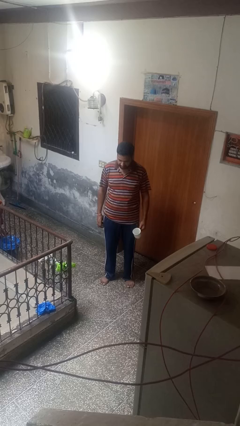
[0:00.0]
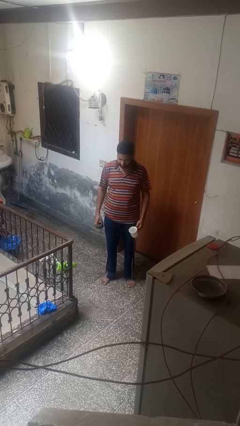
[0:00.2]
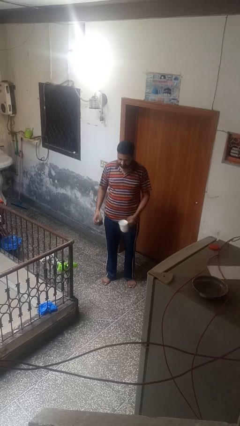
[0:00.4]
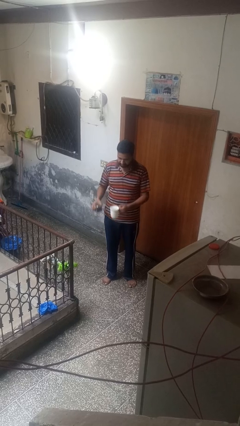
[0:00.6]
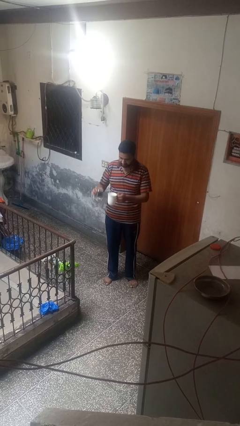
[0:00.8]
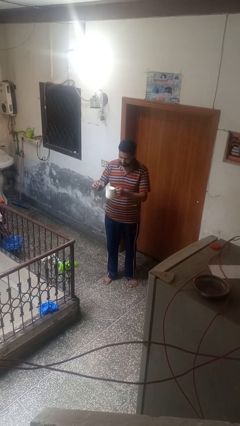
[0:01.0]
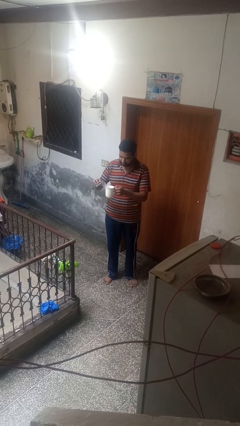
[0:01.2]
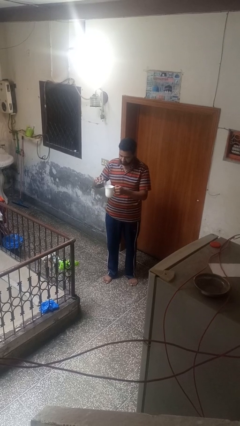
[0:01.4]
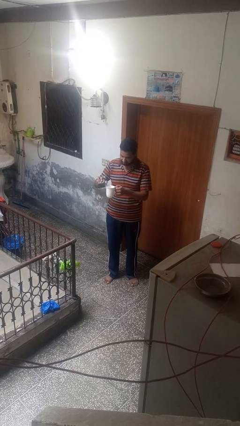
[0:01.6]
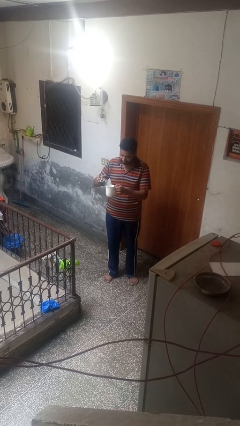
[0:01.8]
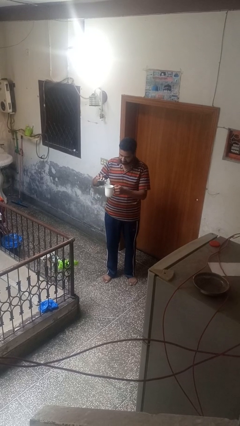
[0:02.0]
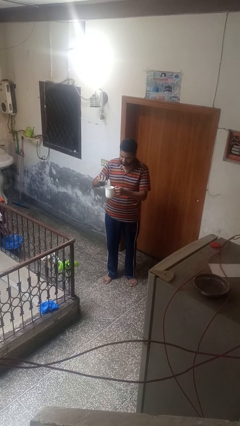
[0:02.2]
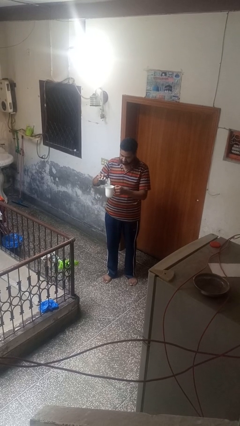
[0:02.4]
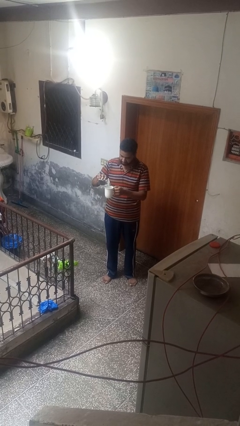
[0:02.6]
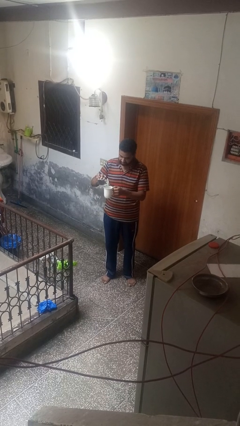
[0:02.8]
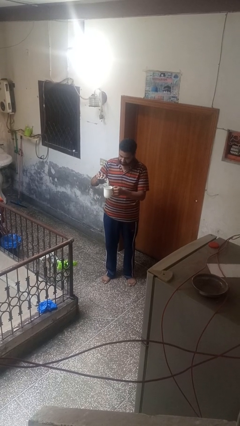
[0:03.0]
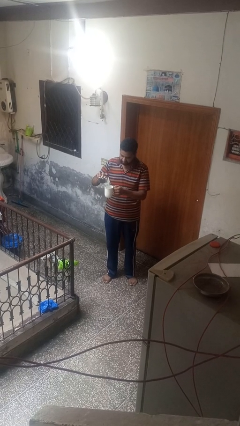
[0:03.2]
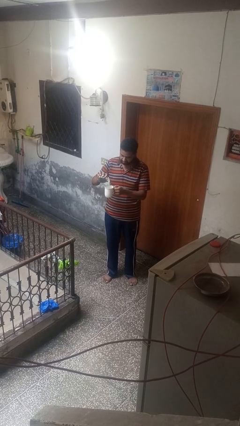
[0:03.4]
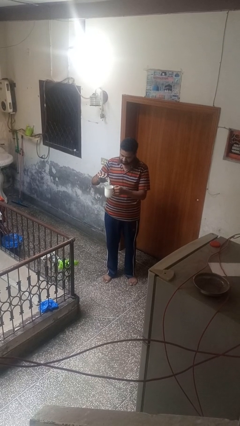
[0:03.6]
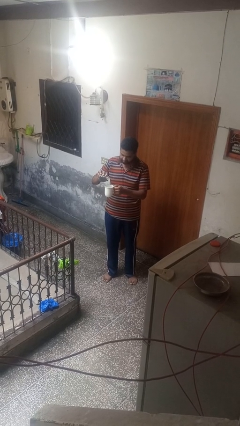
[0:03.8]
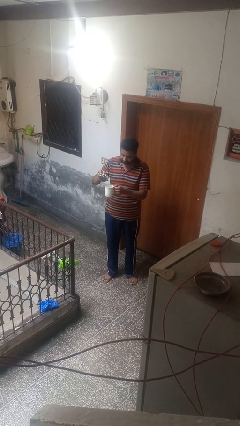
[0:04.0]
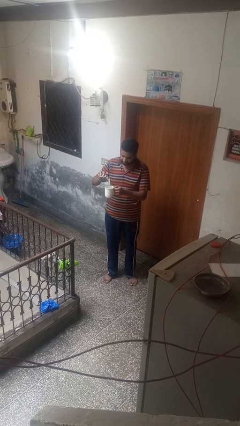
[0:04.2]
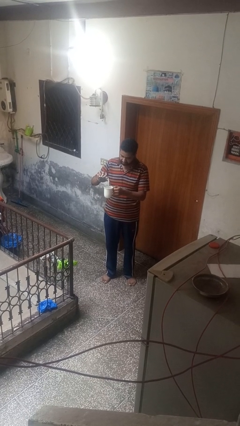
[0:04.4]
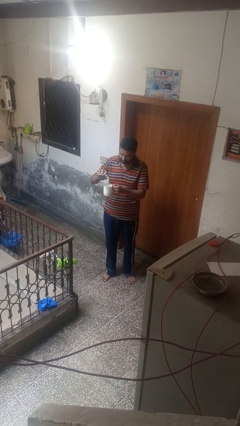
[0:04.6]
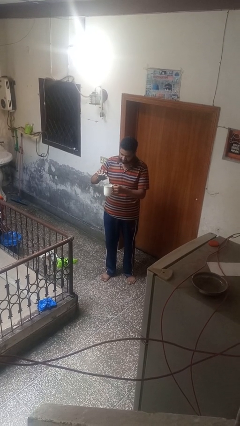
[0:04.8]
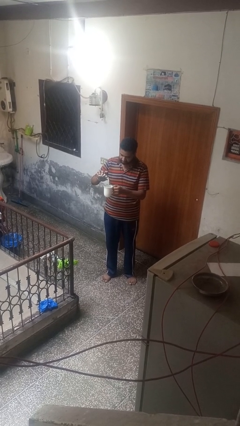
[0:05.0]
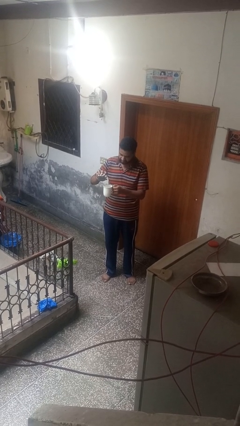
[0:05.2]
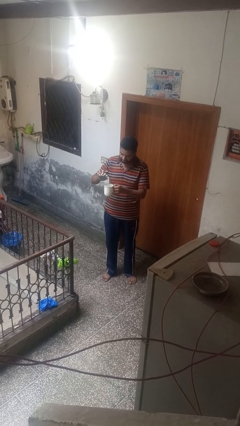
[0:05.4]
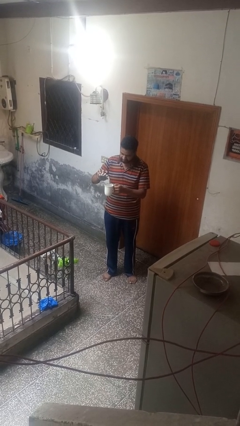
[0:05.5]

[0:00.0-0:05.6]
person pours coffee into mug

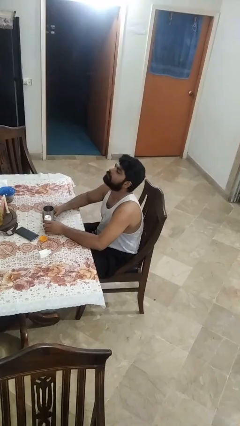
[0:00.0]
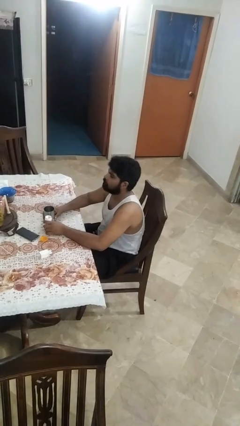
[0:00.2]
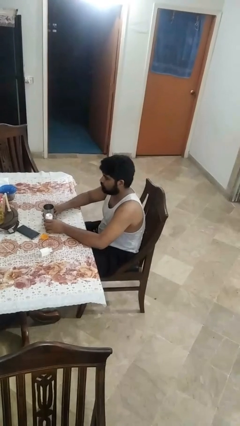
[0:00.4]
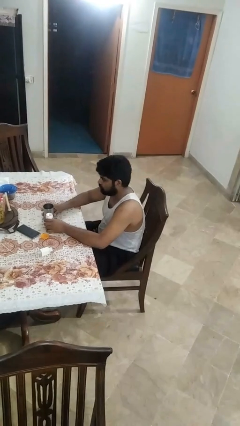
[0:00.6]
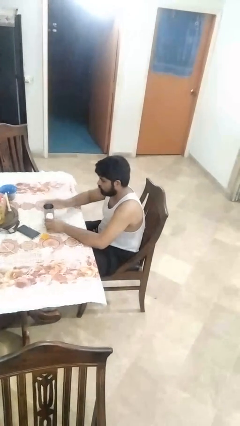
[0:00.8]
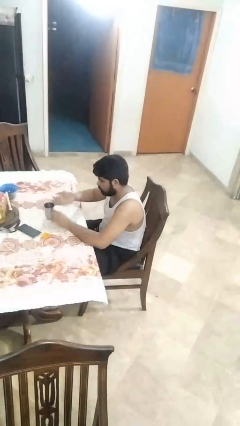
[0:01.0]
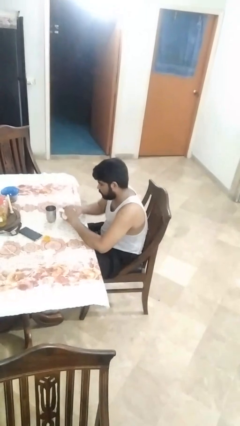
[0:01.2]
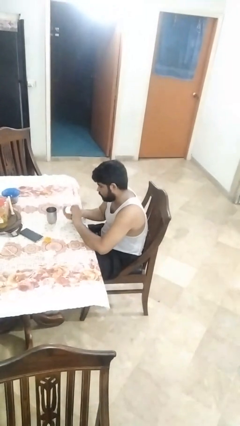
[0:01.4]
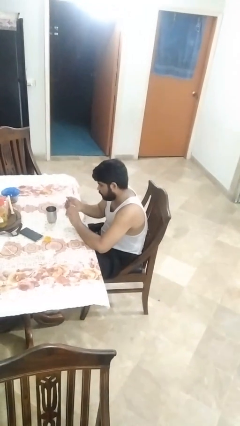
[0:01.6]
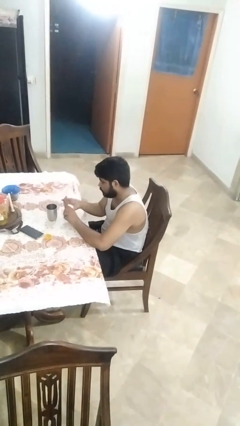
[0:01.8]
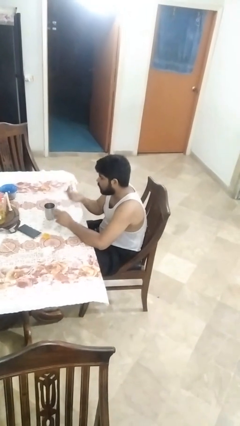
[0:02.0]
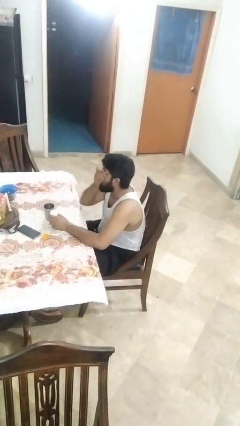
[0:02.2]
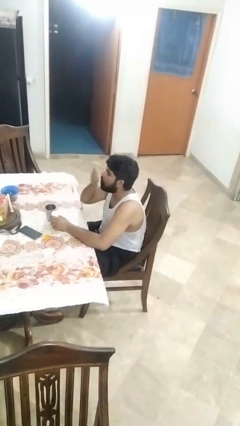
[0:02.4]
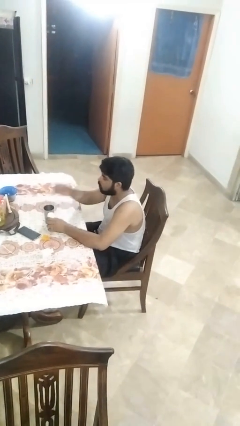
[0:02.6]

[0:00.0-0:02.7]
person takes medicine pills

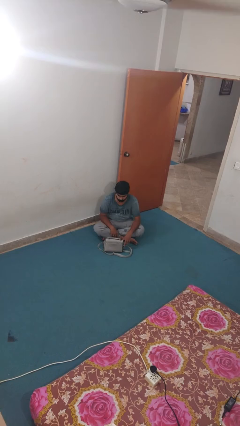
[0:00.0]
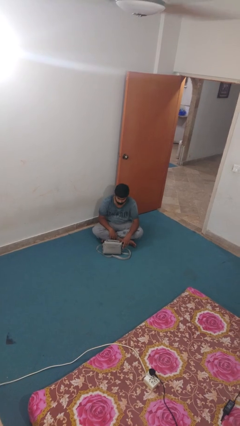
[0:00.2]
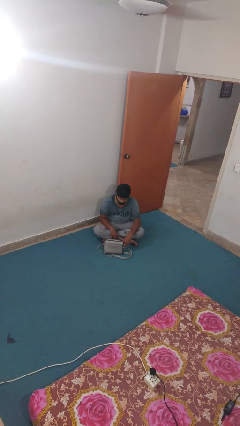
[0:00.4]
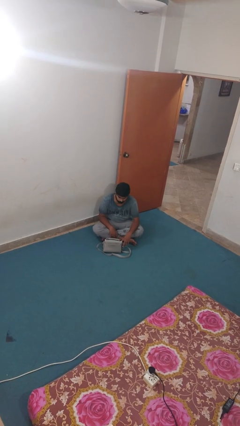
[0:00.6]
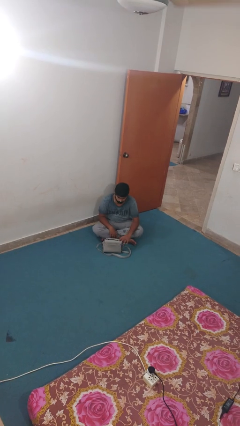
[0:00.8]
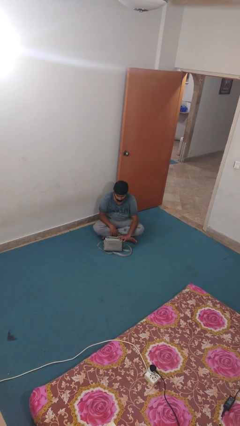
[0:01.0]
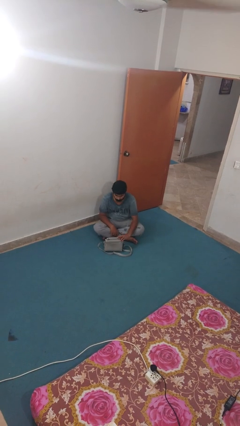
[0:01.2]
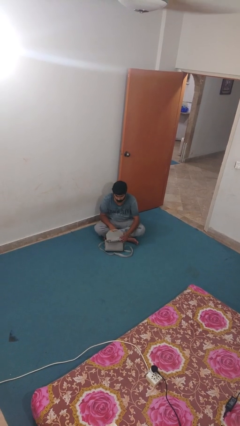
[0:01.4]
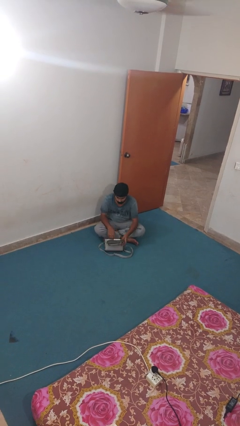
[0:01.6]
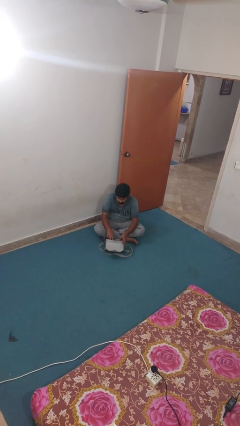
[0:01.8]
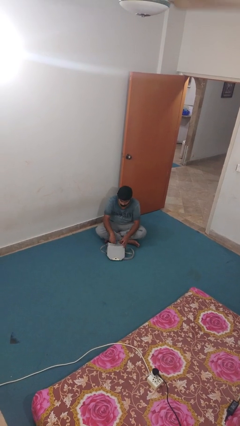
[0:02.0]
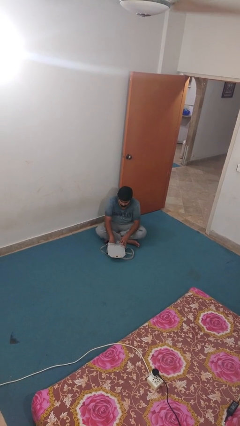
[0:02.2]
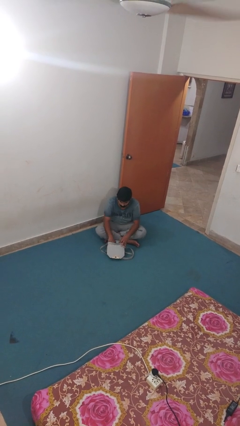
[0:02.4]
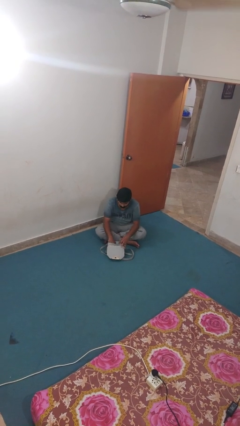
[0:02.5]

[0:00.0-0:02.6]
person searches in purse

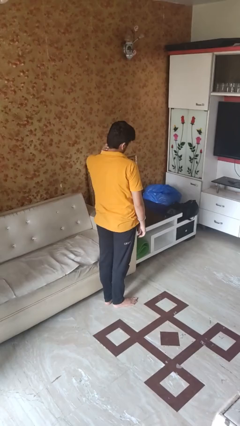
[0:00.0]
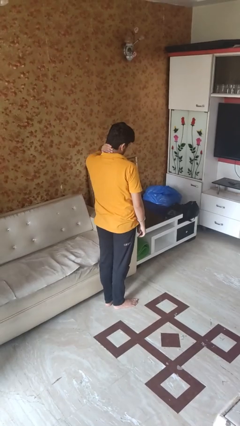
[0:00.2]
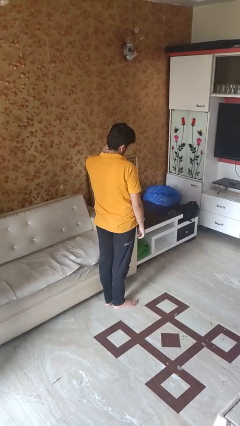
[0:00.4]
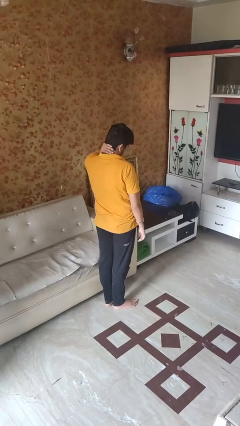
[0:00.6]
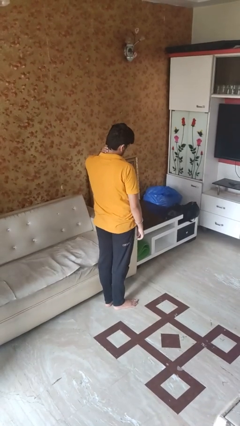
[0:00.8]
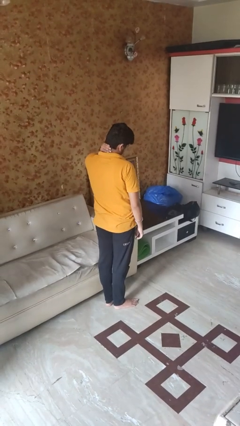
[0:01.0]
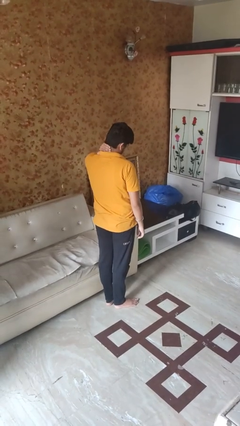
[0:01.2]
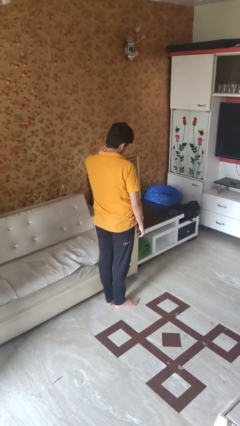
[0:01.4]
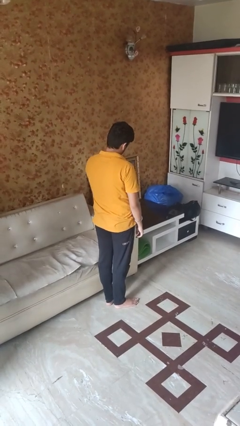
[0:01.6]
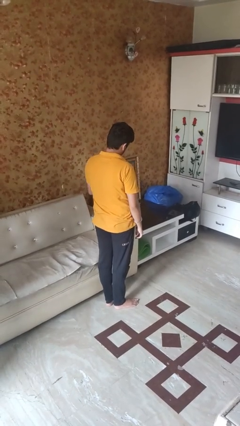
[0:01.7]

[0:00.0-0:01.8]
person rubs neck

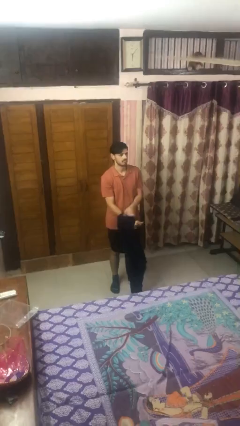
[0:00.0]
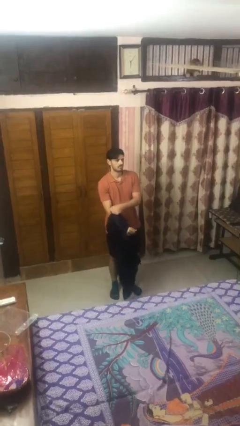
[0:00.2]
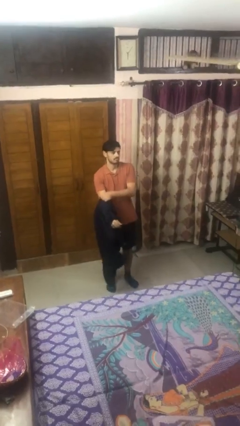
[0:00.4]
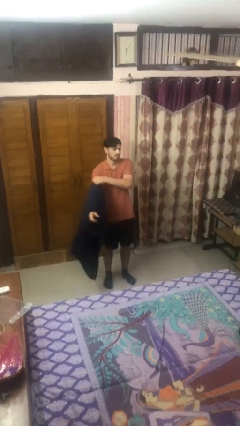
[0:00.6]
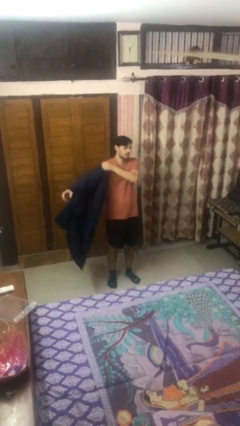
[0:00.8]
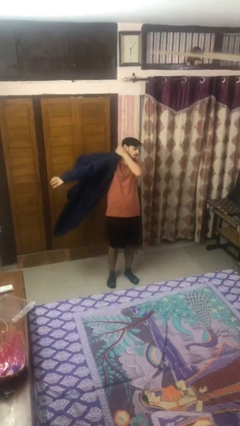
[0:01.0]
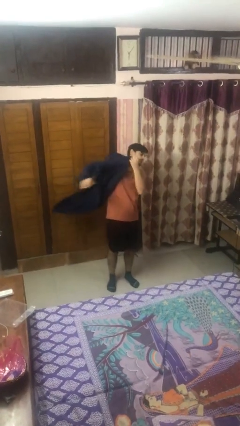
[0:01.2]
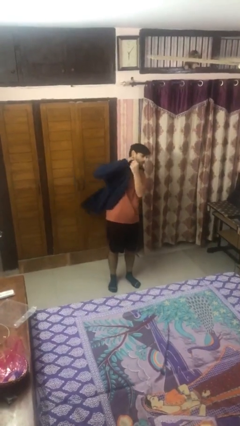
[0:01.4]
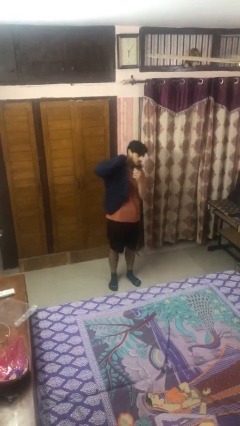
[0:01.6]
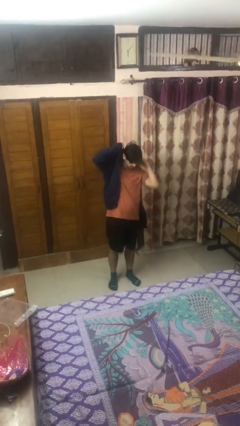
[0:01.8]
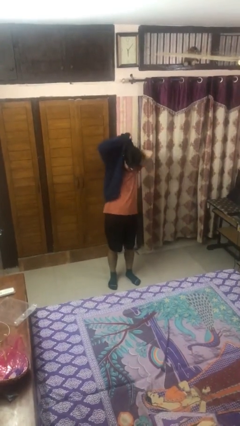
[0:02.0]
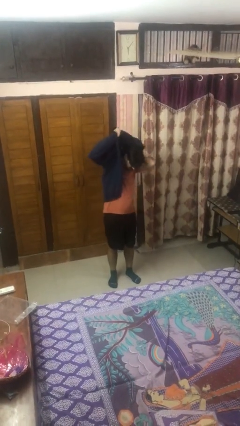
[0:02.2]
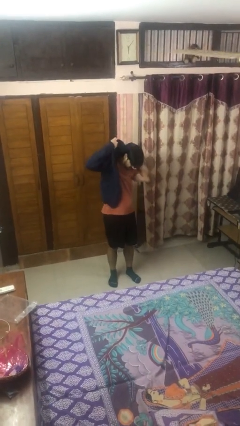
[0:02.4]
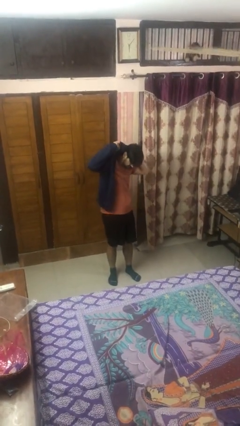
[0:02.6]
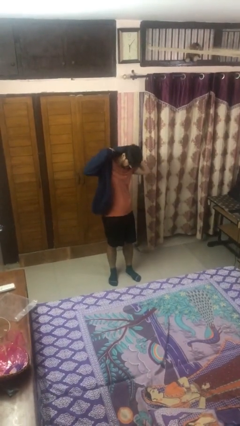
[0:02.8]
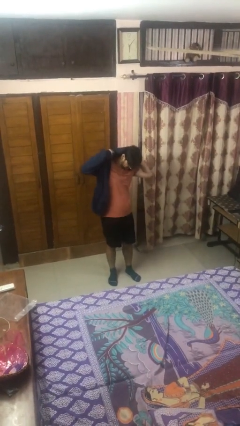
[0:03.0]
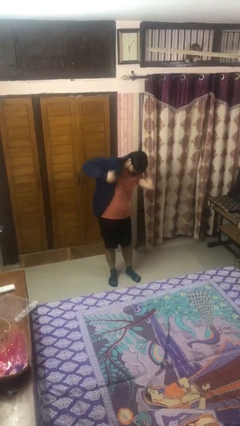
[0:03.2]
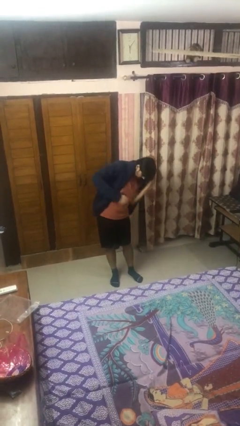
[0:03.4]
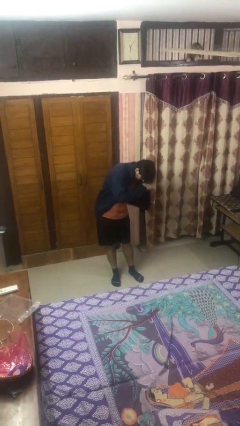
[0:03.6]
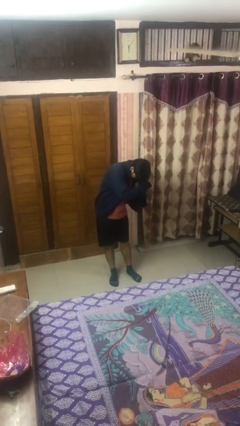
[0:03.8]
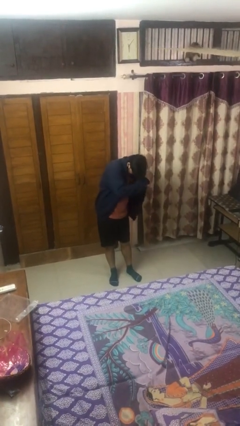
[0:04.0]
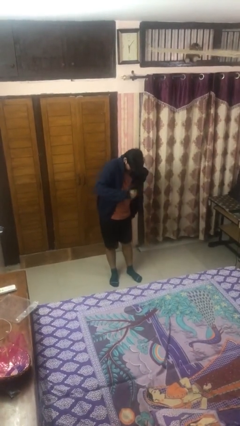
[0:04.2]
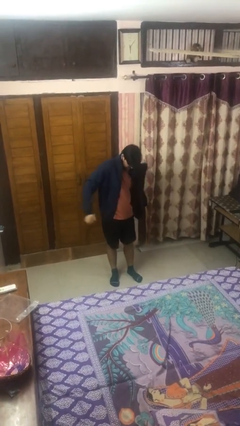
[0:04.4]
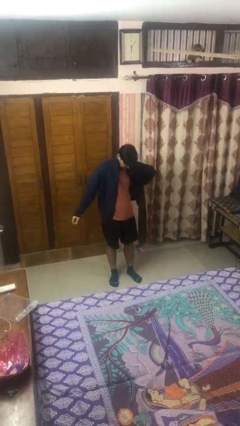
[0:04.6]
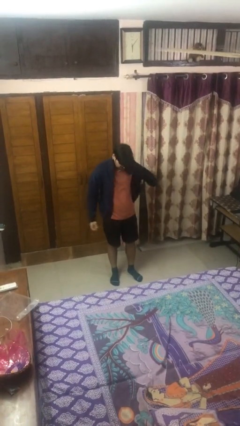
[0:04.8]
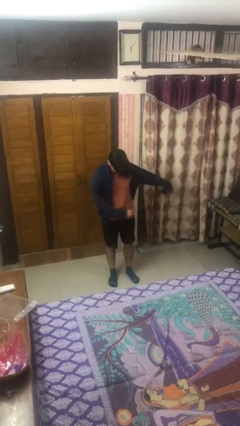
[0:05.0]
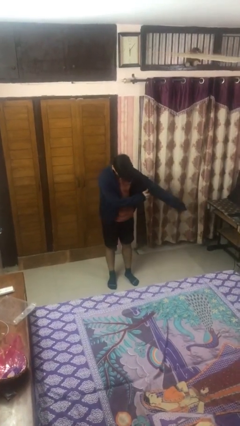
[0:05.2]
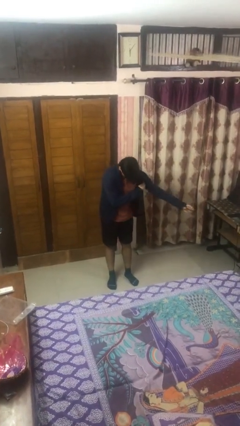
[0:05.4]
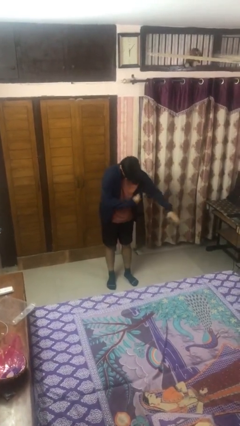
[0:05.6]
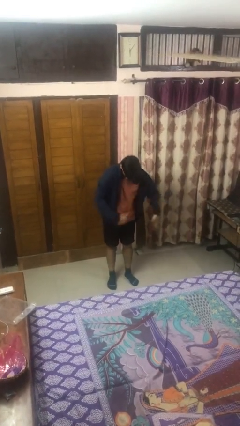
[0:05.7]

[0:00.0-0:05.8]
person puts on jacket
